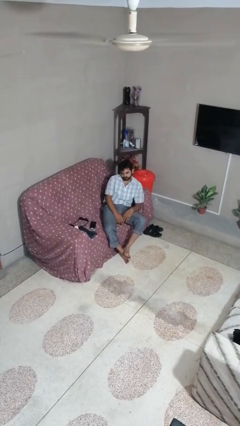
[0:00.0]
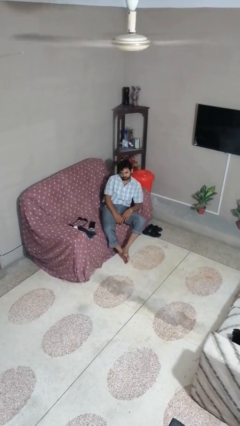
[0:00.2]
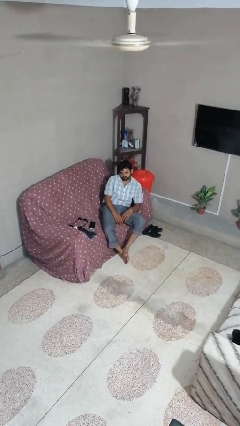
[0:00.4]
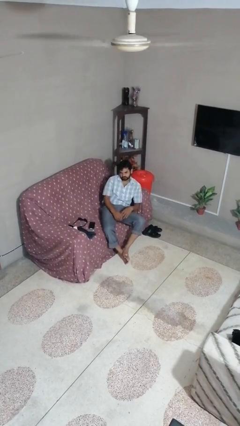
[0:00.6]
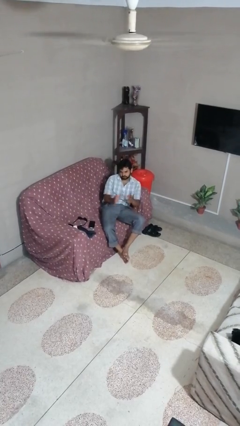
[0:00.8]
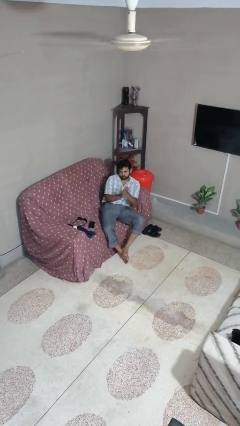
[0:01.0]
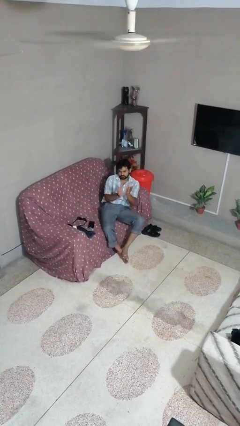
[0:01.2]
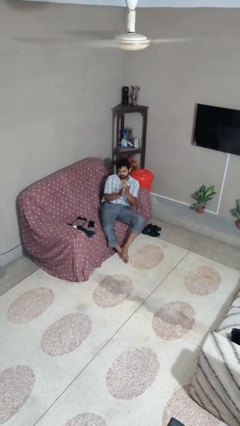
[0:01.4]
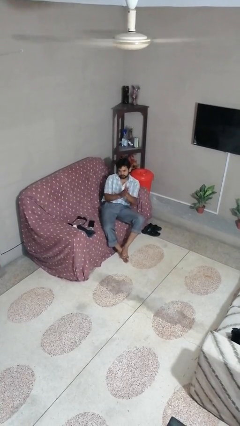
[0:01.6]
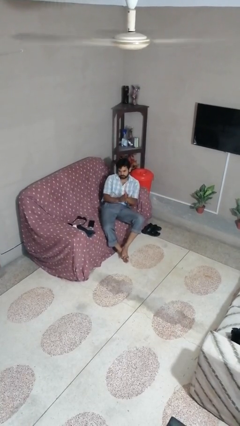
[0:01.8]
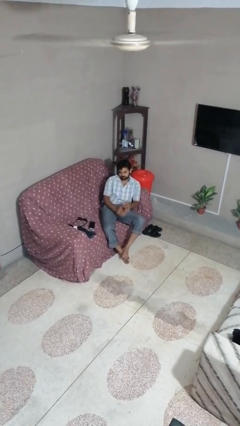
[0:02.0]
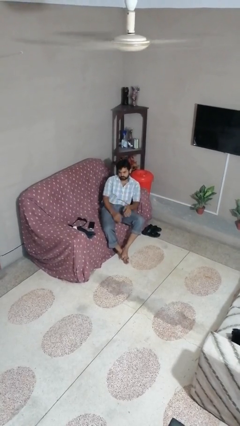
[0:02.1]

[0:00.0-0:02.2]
person claps hands

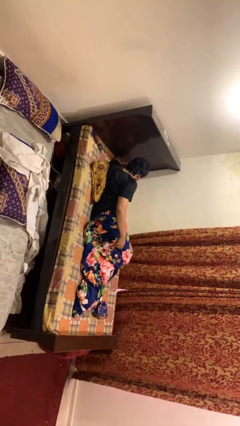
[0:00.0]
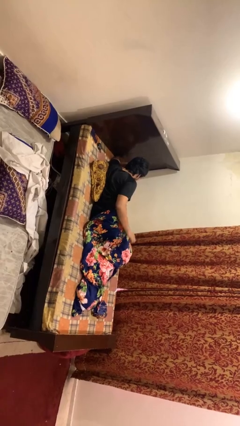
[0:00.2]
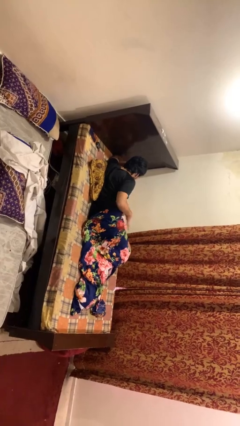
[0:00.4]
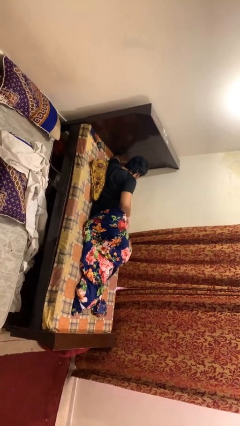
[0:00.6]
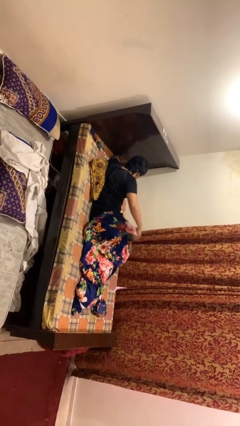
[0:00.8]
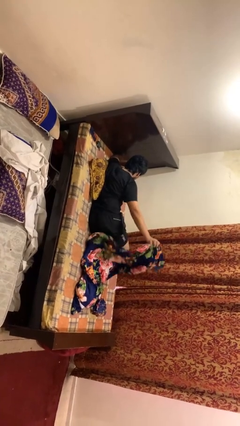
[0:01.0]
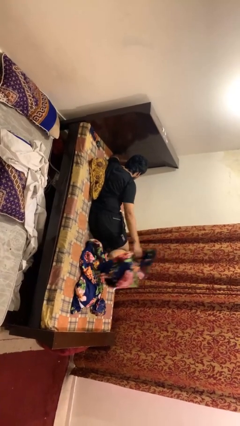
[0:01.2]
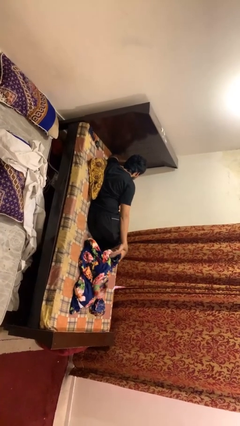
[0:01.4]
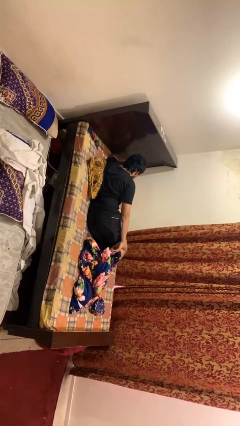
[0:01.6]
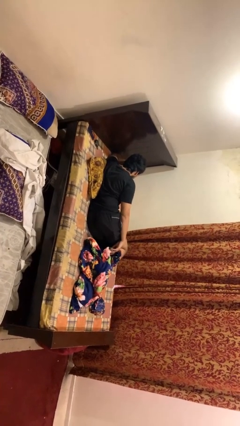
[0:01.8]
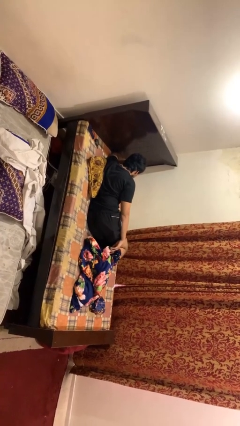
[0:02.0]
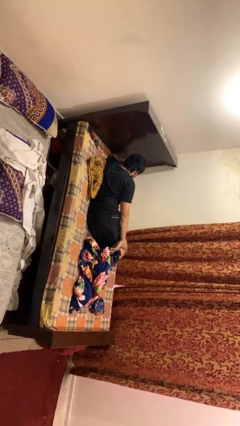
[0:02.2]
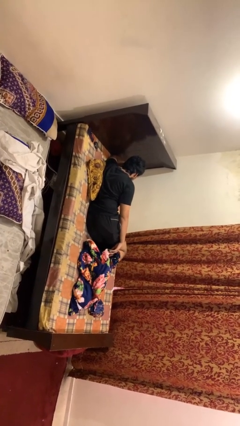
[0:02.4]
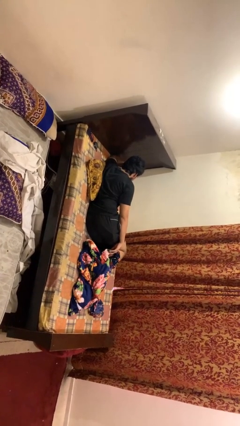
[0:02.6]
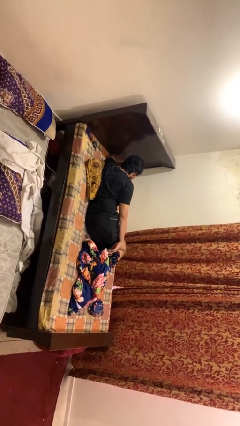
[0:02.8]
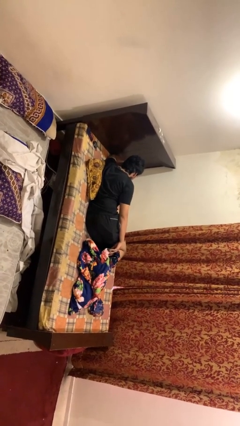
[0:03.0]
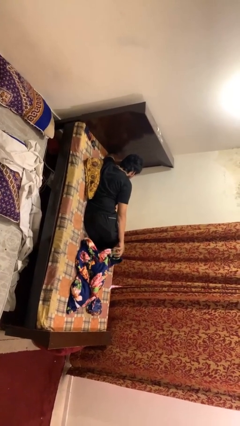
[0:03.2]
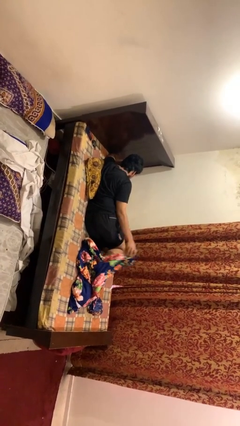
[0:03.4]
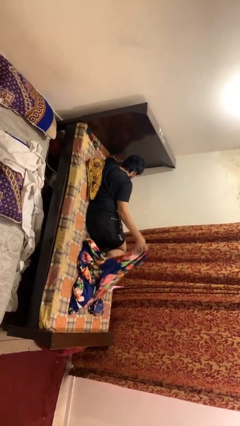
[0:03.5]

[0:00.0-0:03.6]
person uncovers with blanket

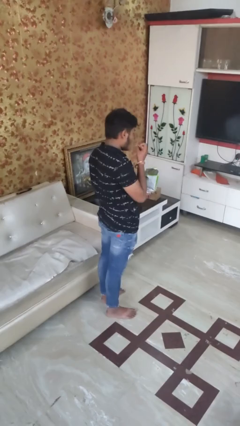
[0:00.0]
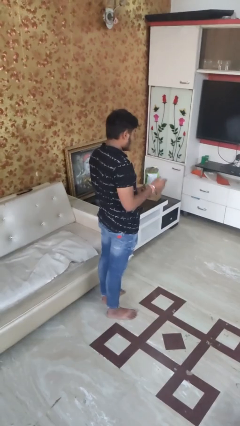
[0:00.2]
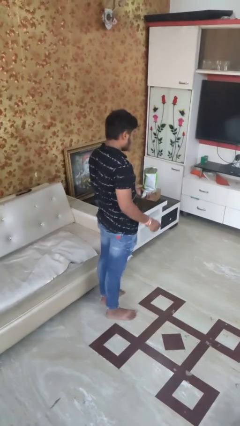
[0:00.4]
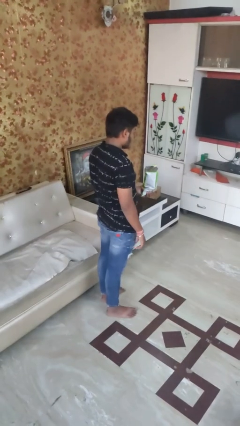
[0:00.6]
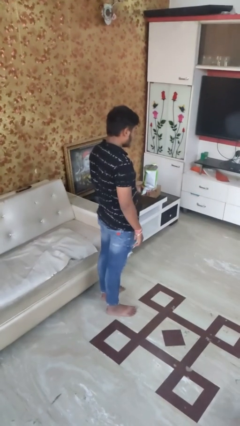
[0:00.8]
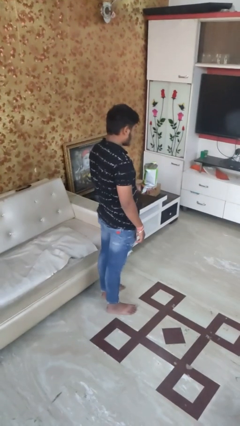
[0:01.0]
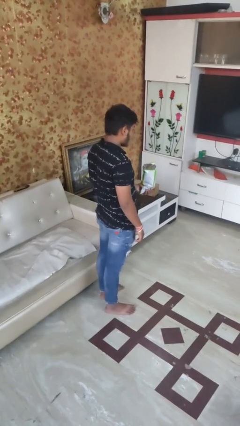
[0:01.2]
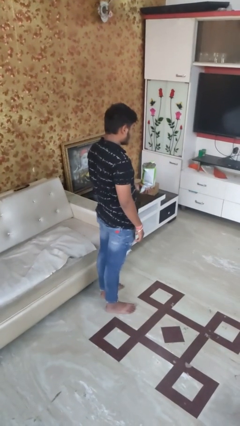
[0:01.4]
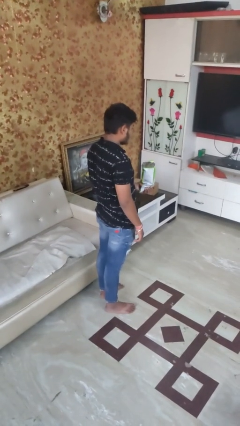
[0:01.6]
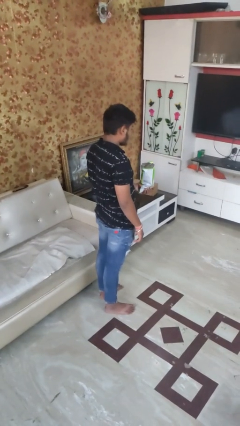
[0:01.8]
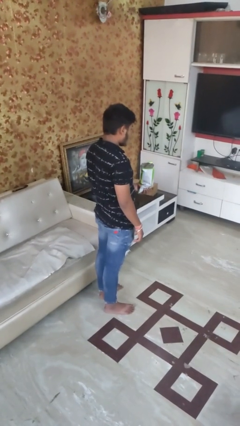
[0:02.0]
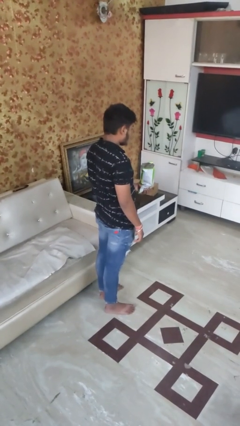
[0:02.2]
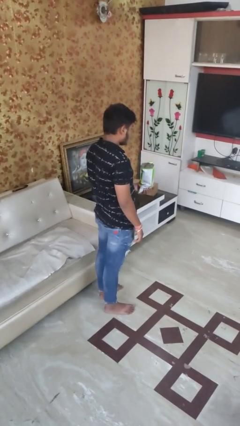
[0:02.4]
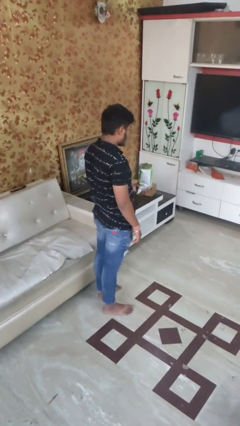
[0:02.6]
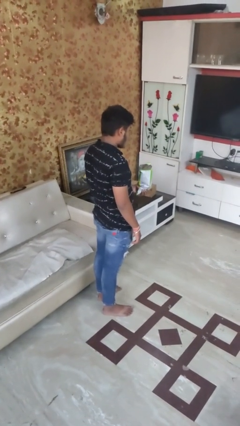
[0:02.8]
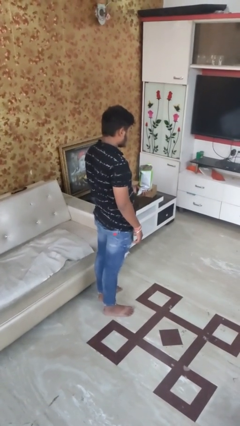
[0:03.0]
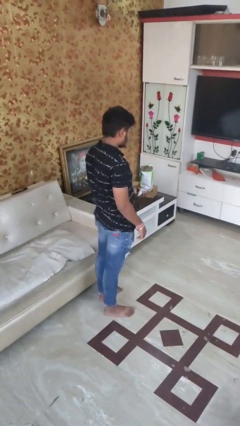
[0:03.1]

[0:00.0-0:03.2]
person eats snack from bag

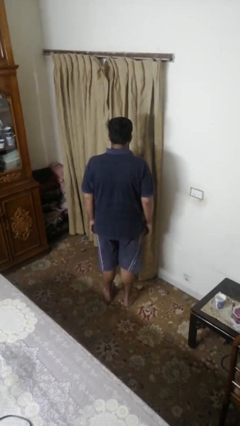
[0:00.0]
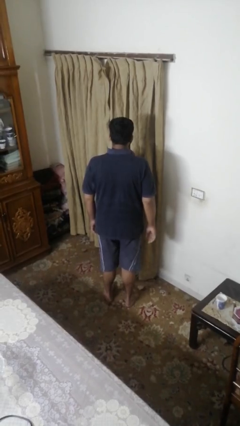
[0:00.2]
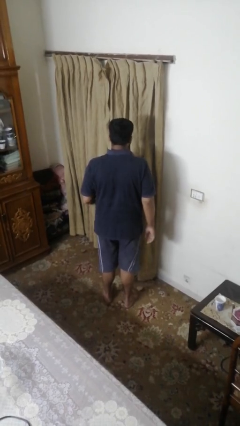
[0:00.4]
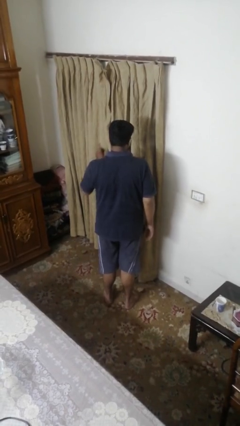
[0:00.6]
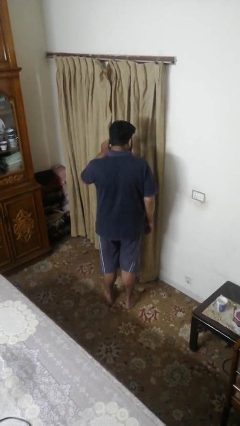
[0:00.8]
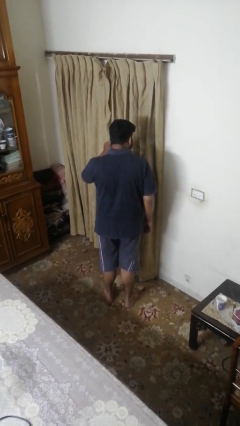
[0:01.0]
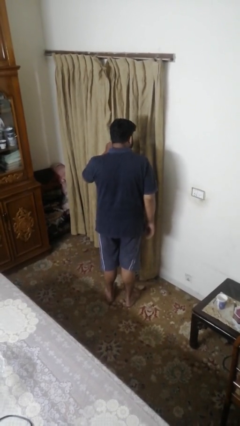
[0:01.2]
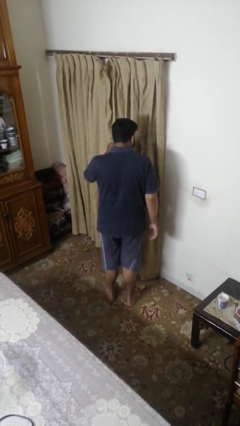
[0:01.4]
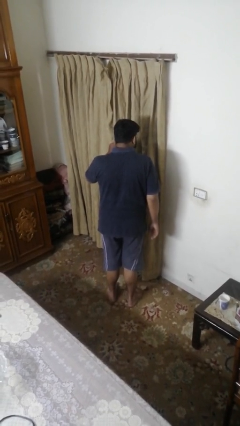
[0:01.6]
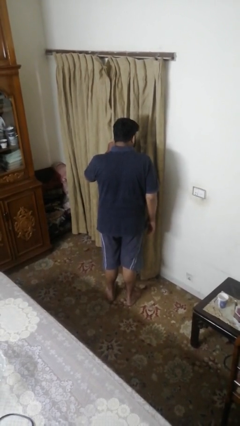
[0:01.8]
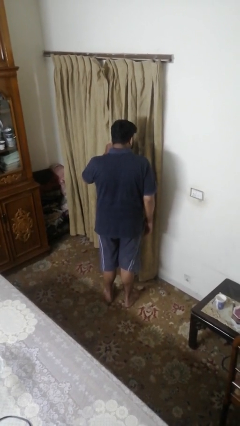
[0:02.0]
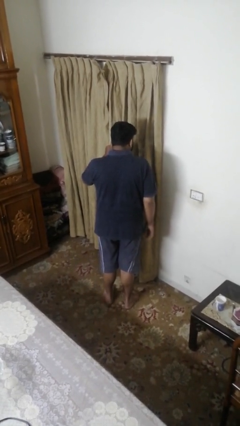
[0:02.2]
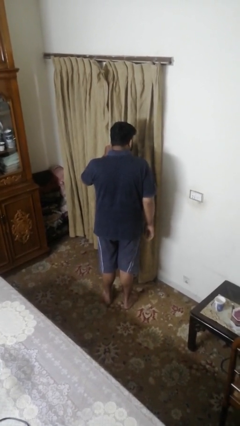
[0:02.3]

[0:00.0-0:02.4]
person gestures listen closely

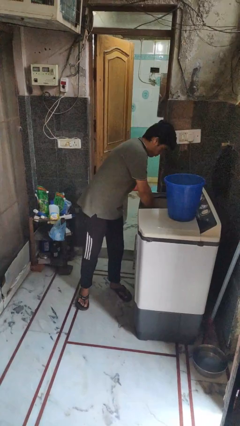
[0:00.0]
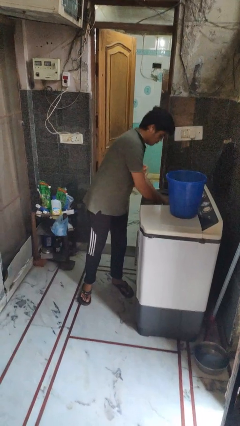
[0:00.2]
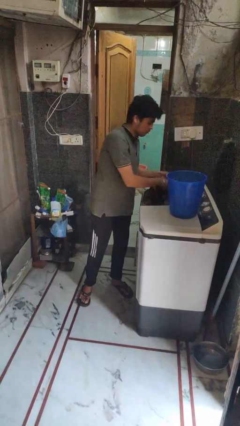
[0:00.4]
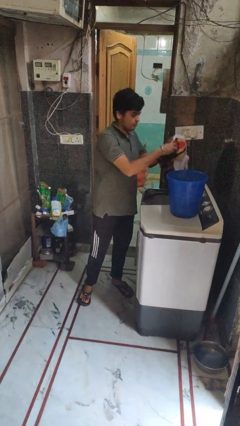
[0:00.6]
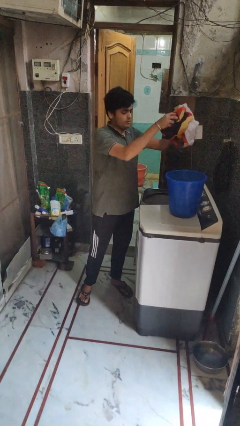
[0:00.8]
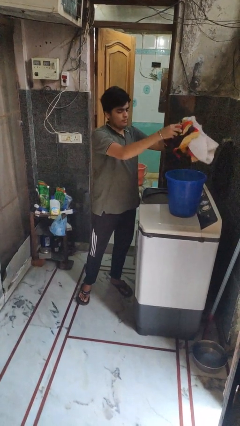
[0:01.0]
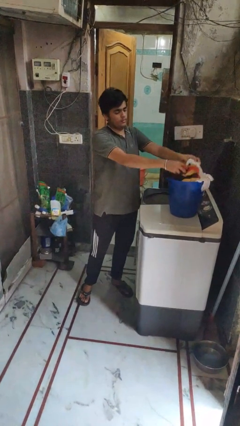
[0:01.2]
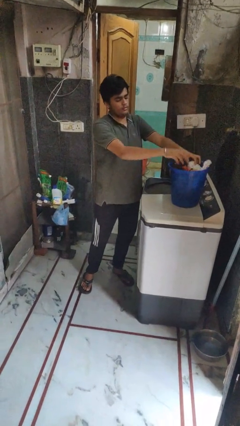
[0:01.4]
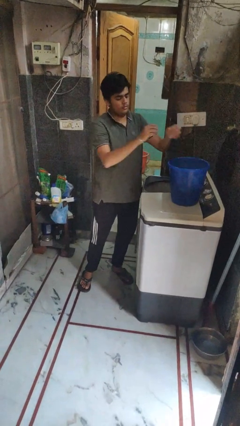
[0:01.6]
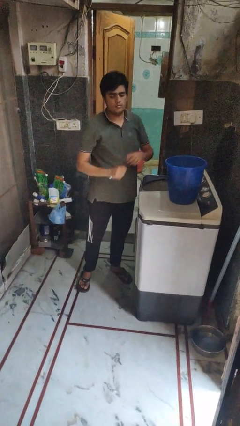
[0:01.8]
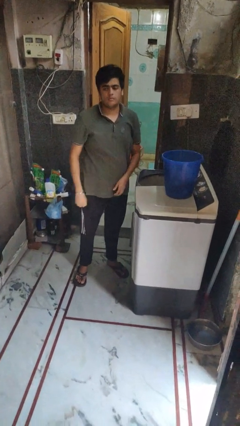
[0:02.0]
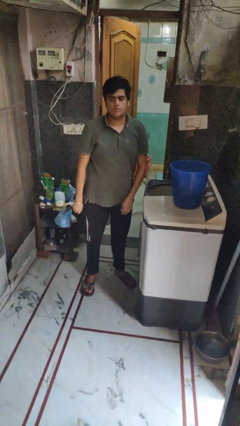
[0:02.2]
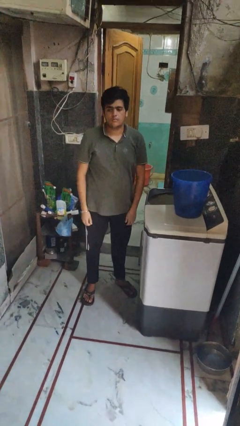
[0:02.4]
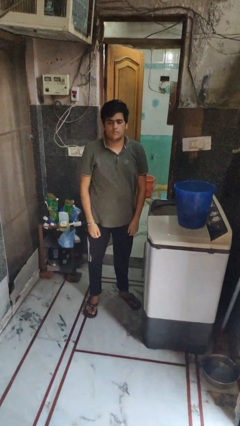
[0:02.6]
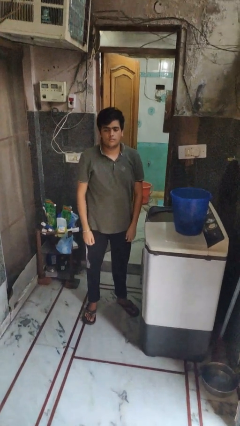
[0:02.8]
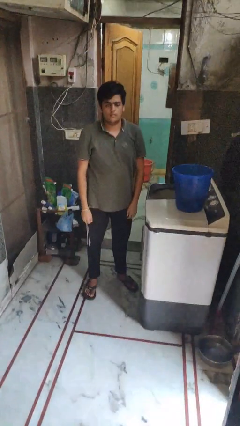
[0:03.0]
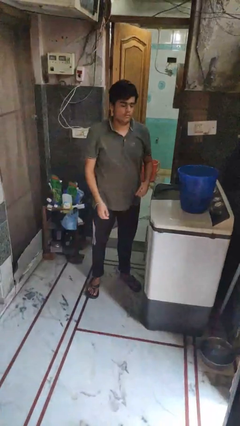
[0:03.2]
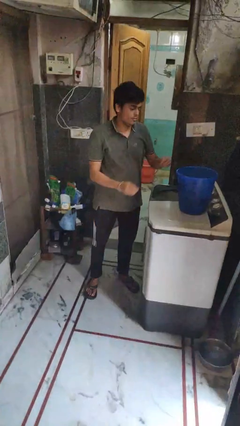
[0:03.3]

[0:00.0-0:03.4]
person unloads clotheswasher

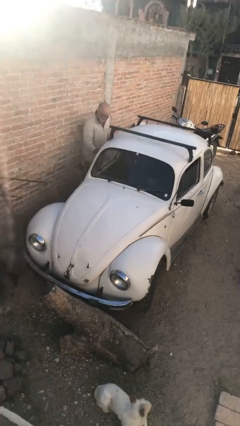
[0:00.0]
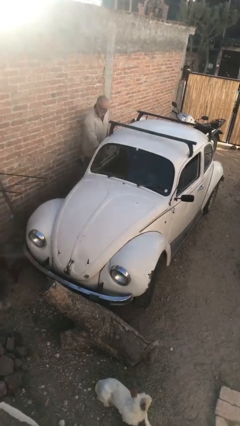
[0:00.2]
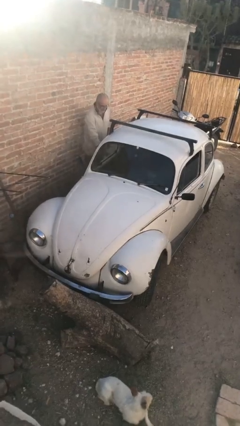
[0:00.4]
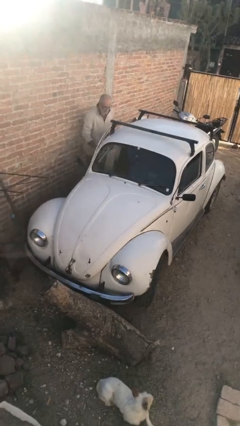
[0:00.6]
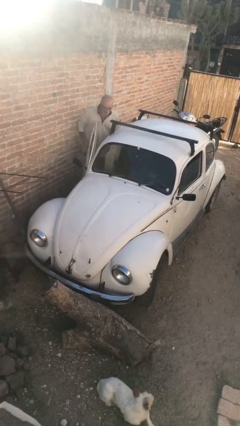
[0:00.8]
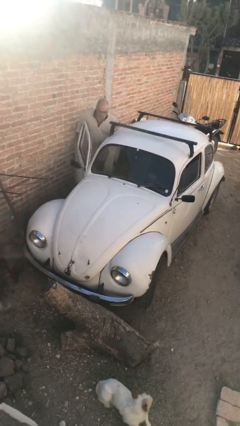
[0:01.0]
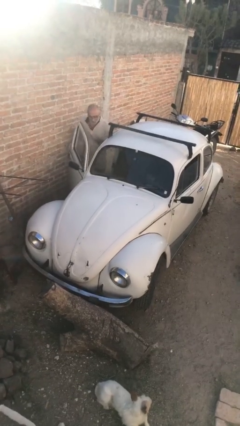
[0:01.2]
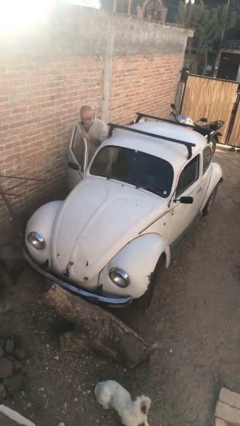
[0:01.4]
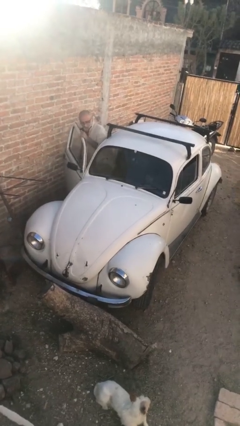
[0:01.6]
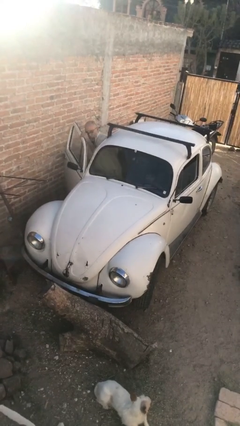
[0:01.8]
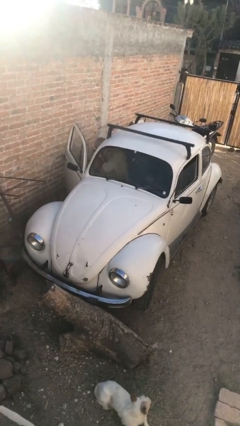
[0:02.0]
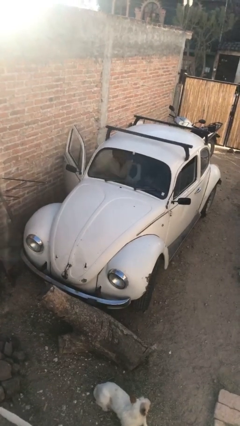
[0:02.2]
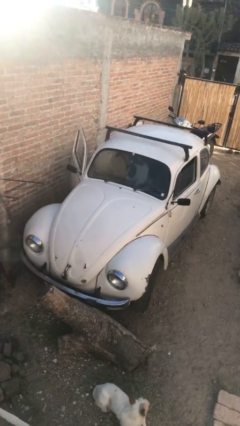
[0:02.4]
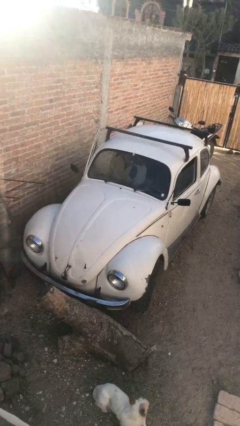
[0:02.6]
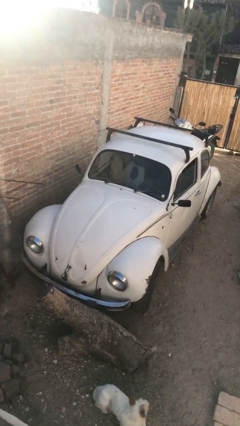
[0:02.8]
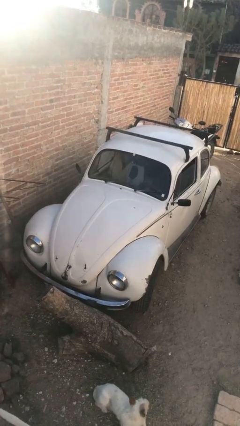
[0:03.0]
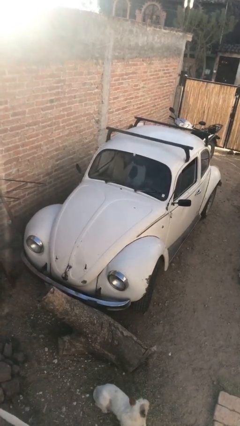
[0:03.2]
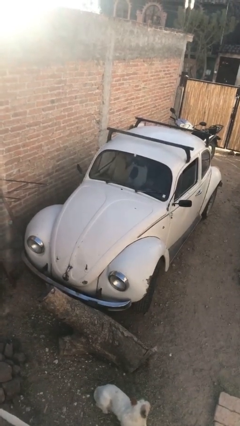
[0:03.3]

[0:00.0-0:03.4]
car picks up person
